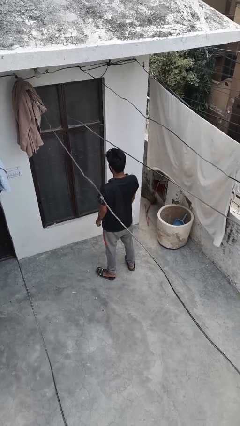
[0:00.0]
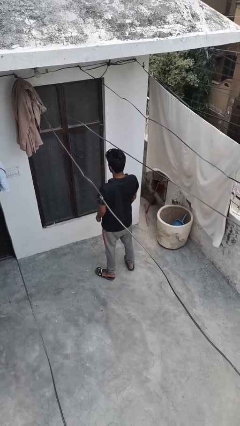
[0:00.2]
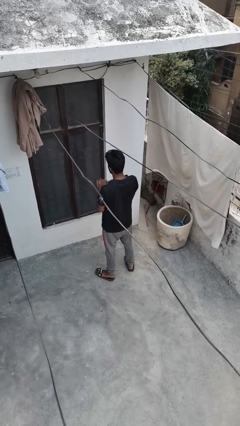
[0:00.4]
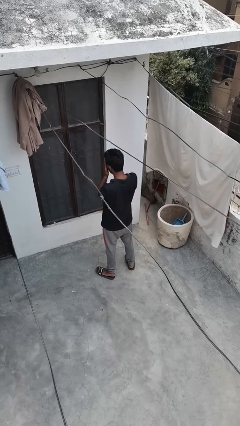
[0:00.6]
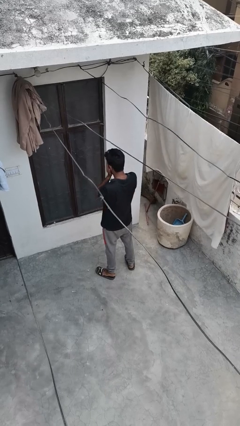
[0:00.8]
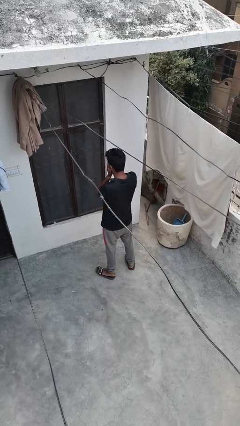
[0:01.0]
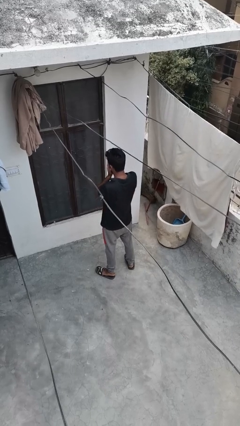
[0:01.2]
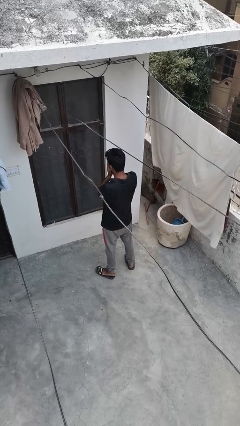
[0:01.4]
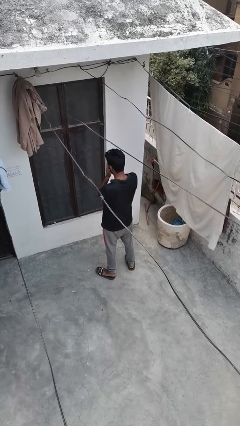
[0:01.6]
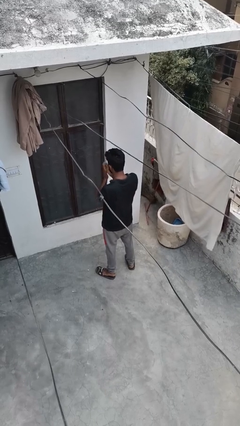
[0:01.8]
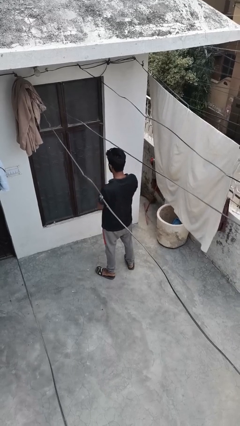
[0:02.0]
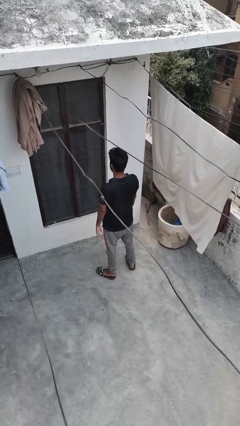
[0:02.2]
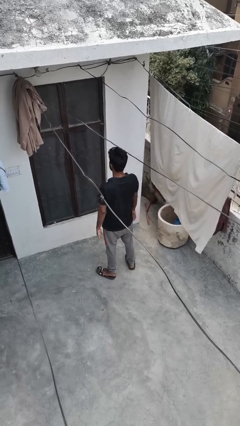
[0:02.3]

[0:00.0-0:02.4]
person covers face with hands

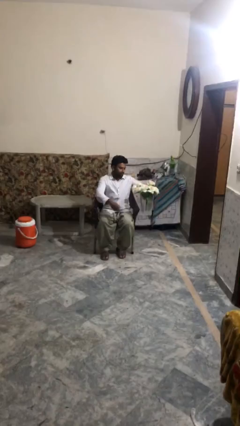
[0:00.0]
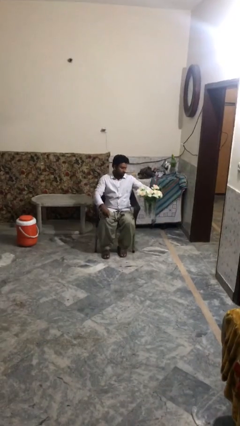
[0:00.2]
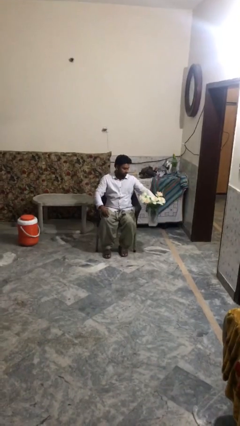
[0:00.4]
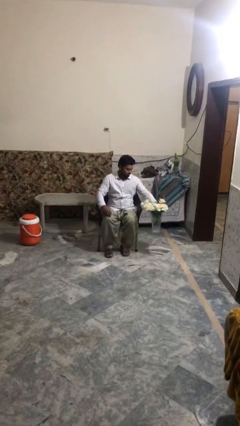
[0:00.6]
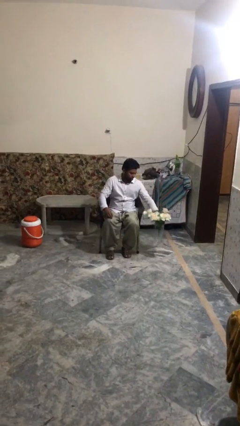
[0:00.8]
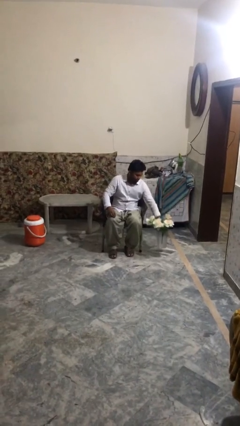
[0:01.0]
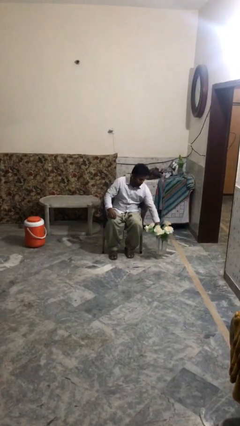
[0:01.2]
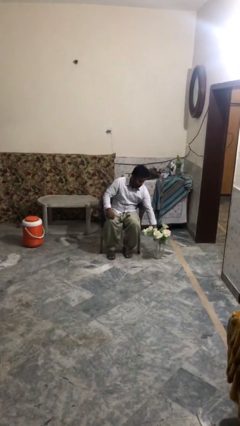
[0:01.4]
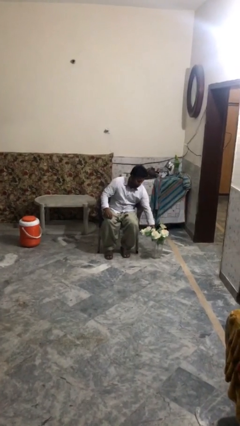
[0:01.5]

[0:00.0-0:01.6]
person puts down object on floor

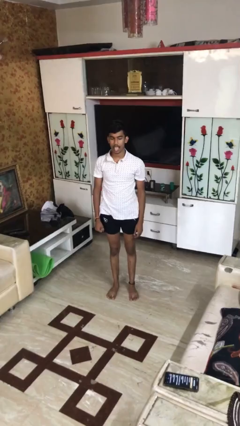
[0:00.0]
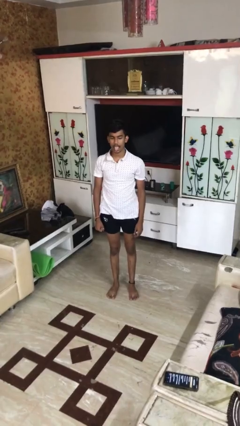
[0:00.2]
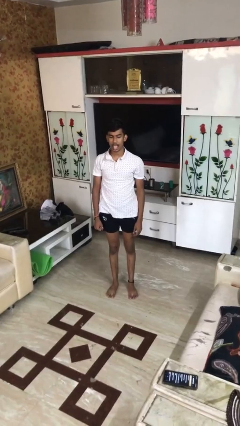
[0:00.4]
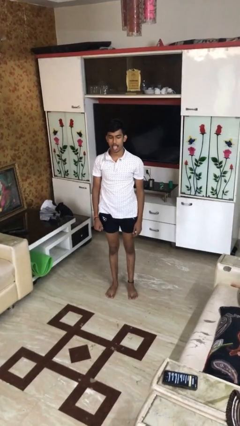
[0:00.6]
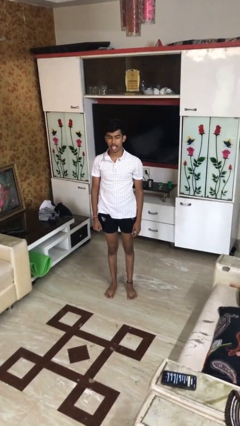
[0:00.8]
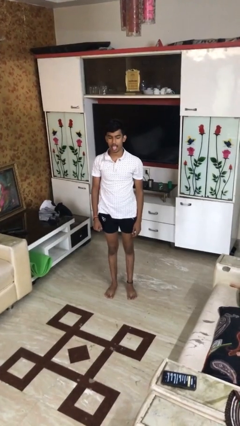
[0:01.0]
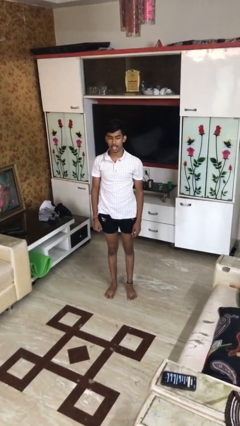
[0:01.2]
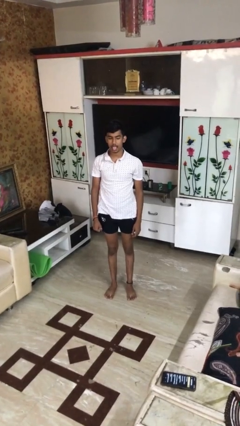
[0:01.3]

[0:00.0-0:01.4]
person sticks out tongue

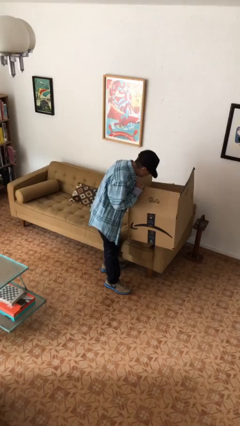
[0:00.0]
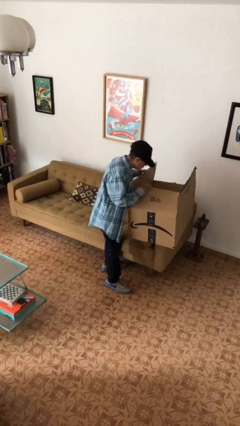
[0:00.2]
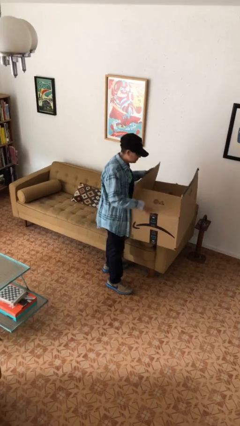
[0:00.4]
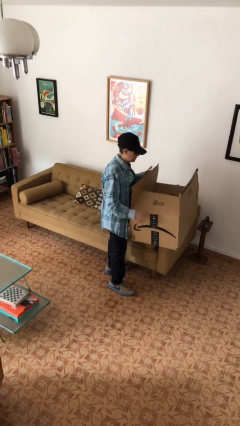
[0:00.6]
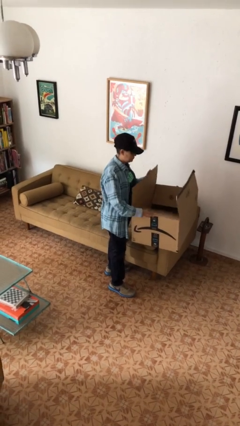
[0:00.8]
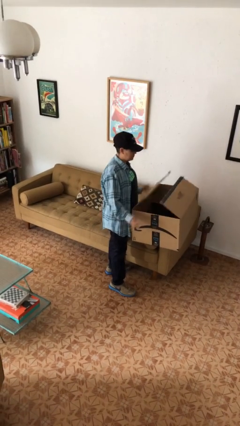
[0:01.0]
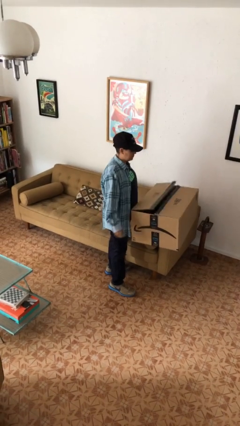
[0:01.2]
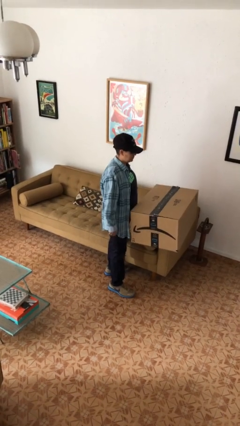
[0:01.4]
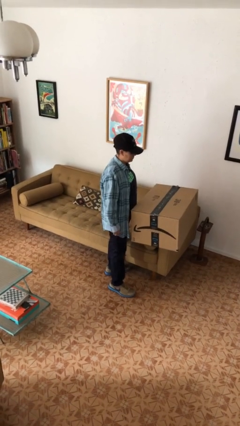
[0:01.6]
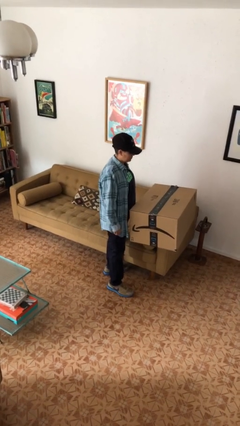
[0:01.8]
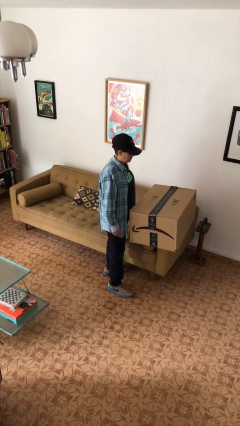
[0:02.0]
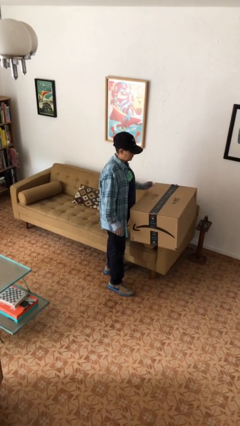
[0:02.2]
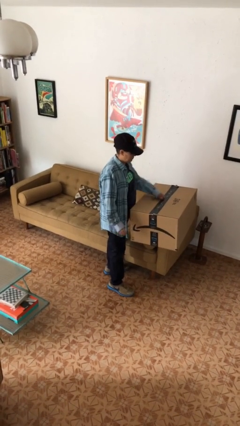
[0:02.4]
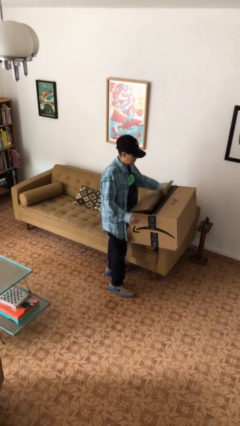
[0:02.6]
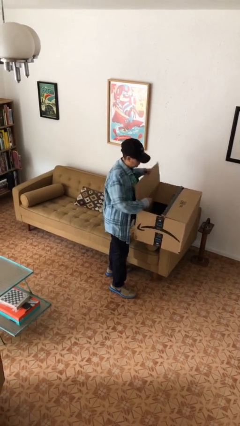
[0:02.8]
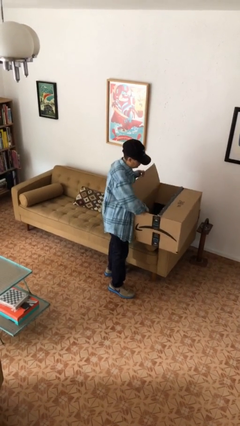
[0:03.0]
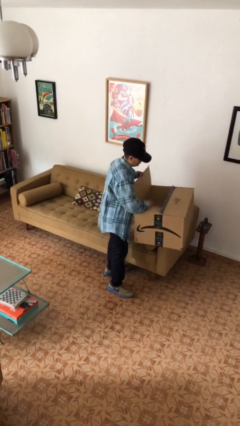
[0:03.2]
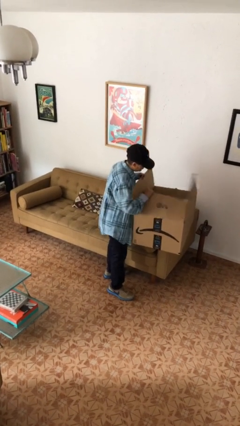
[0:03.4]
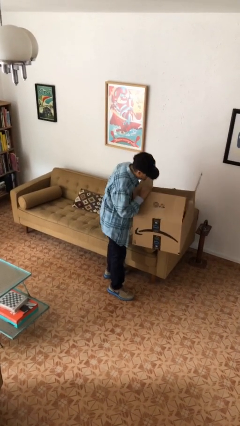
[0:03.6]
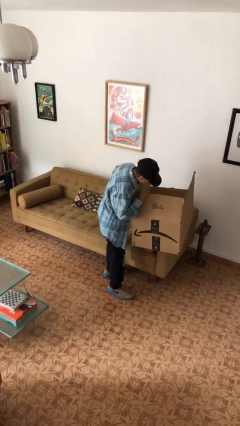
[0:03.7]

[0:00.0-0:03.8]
person searches in box

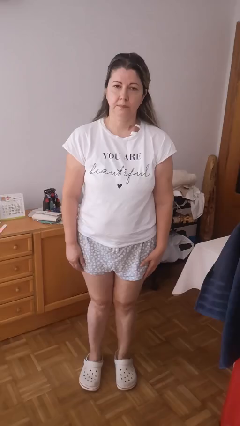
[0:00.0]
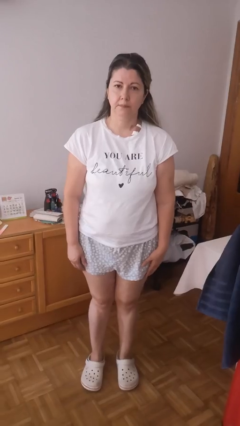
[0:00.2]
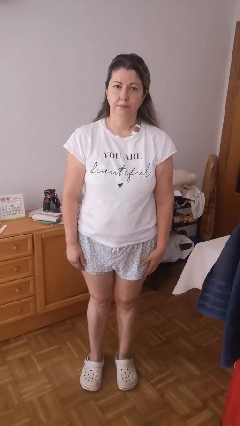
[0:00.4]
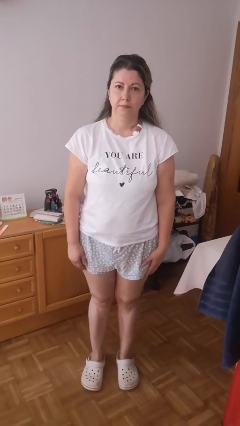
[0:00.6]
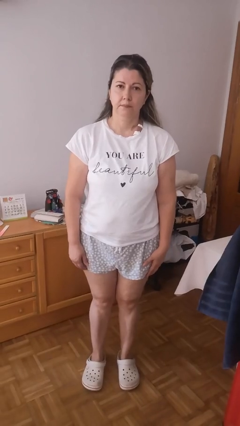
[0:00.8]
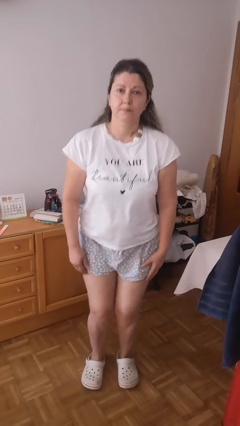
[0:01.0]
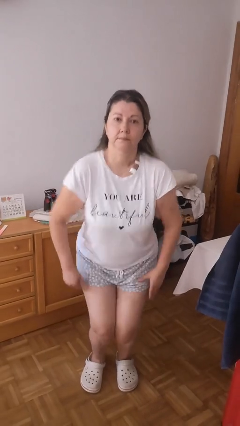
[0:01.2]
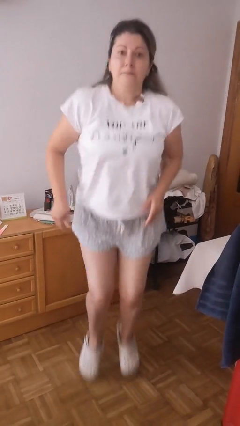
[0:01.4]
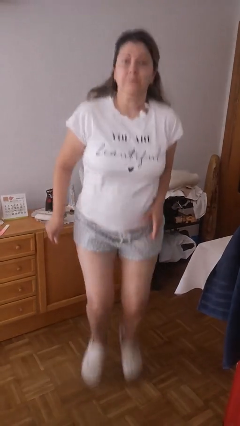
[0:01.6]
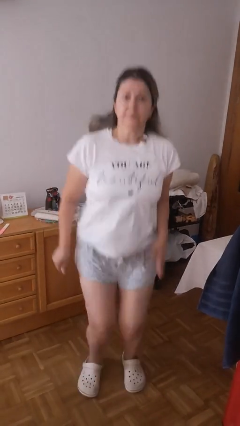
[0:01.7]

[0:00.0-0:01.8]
person jumps

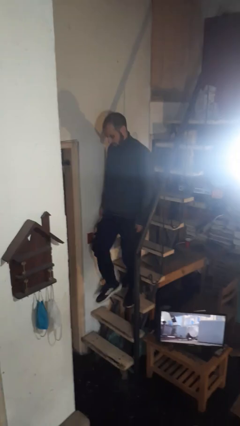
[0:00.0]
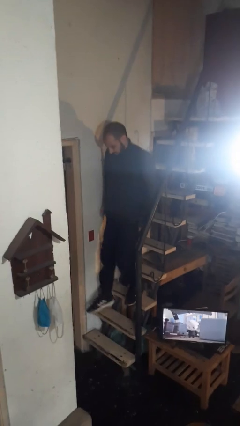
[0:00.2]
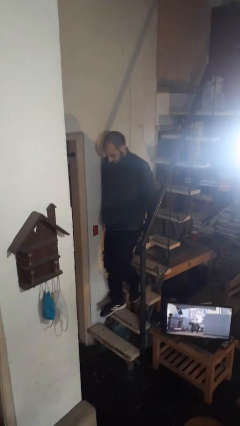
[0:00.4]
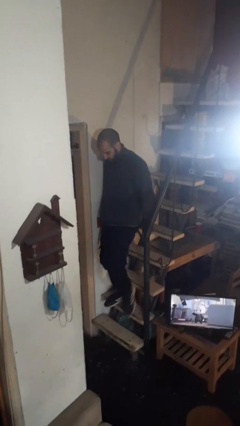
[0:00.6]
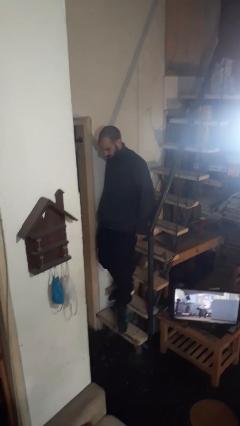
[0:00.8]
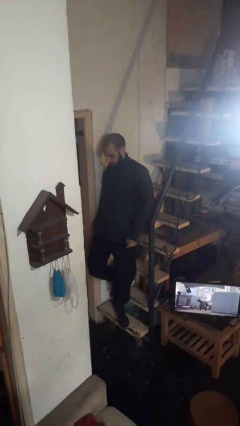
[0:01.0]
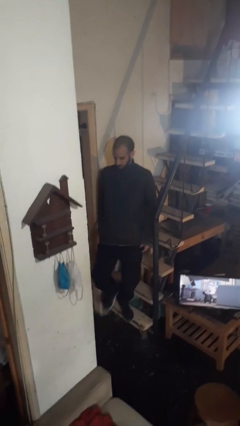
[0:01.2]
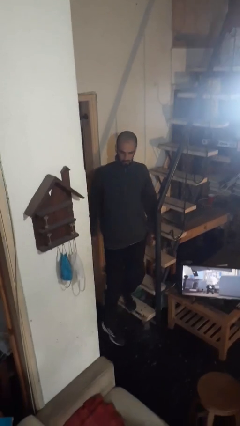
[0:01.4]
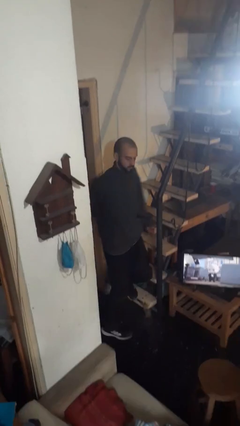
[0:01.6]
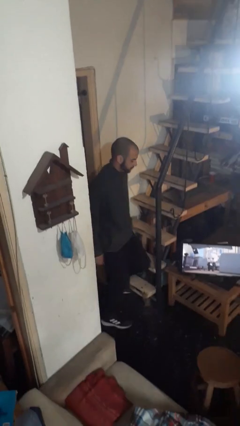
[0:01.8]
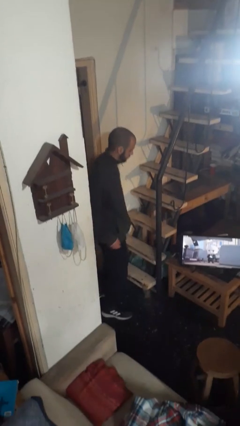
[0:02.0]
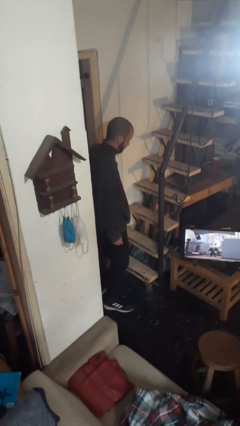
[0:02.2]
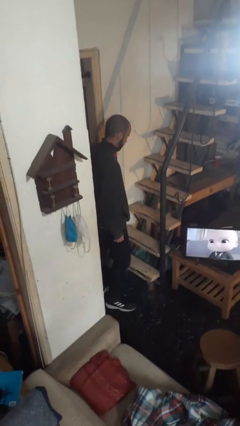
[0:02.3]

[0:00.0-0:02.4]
person climbs down stairs

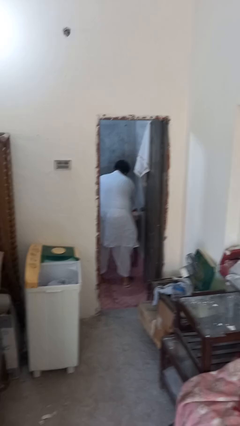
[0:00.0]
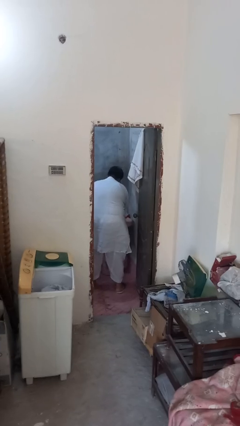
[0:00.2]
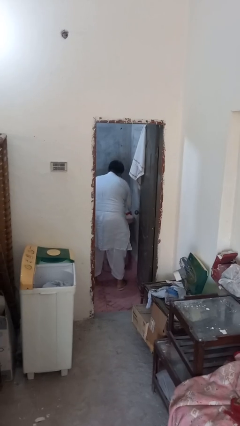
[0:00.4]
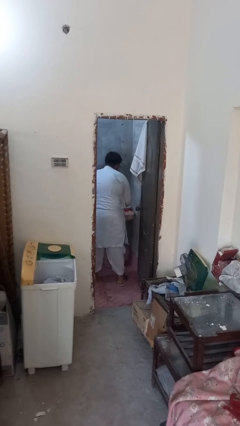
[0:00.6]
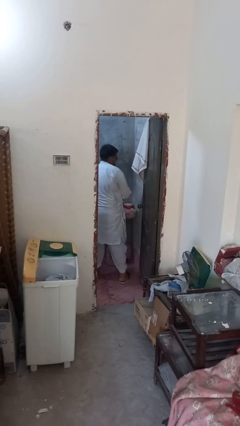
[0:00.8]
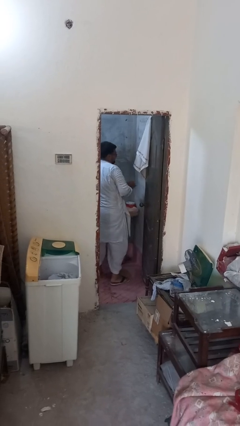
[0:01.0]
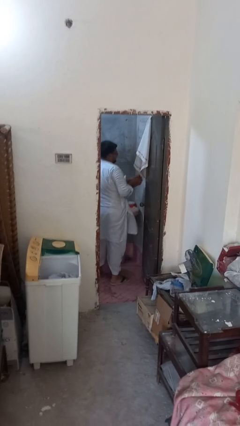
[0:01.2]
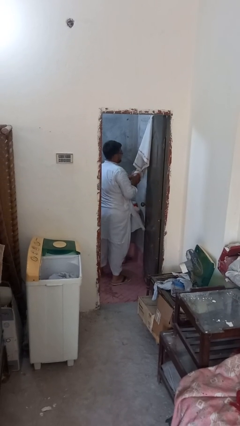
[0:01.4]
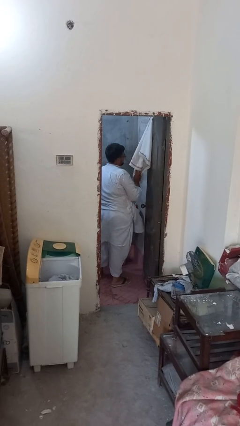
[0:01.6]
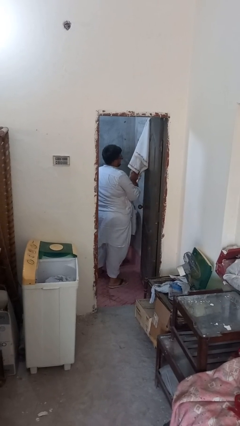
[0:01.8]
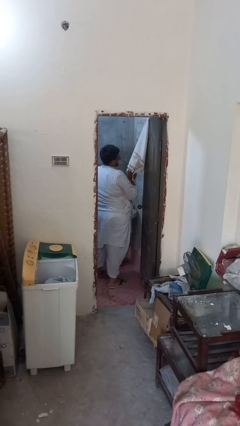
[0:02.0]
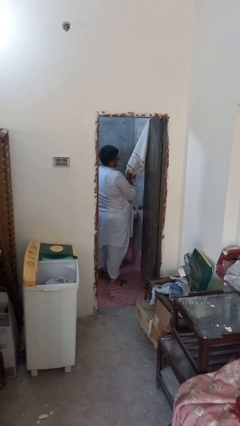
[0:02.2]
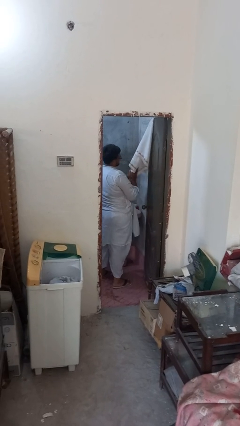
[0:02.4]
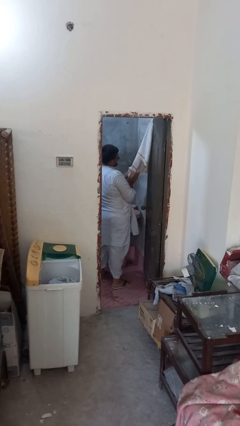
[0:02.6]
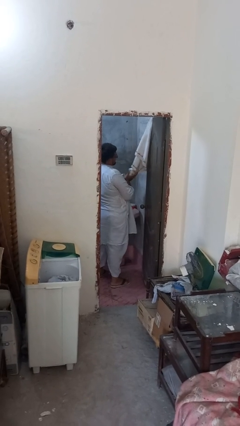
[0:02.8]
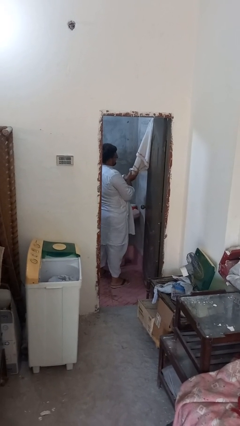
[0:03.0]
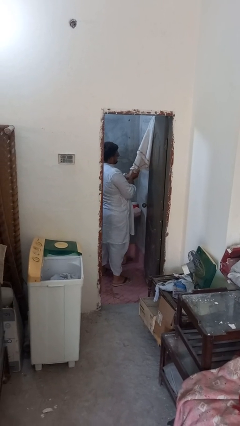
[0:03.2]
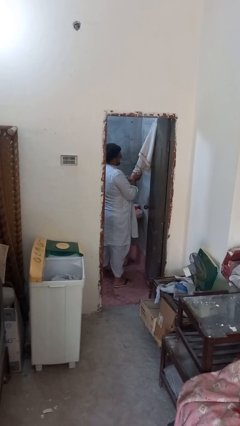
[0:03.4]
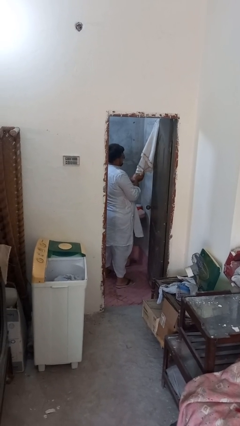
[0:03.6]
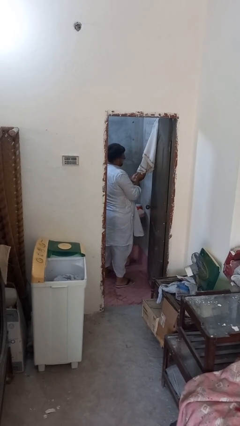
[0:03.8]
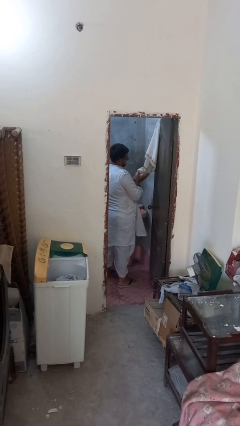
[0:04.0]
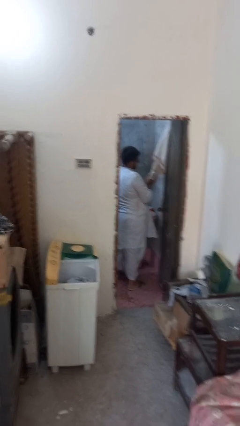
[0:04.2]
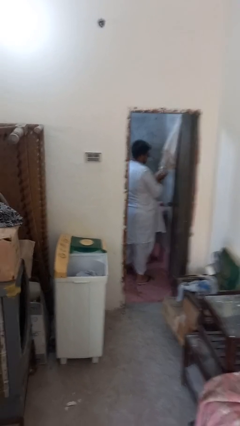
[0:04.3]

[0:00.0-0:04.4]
person dries hands with towel
